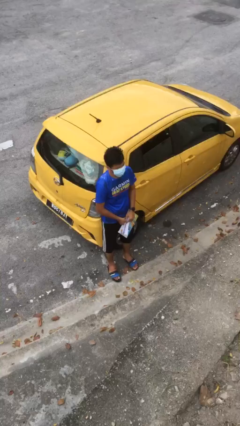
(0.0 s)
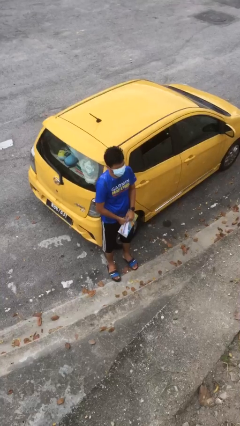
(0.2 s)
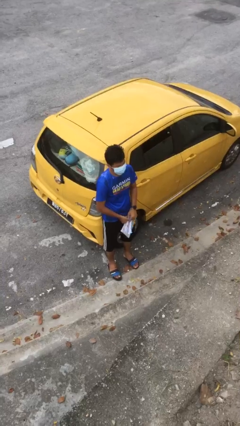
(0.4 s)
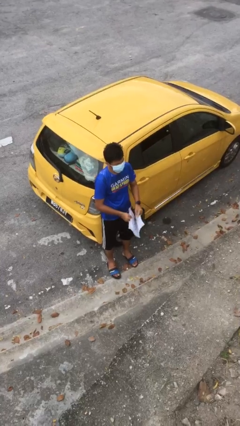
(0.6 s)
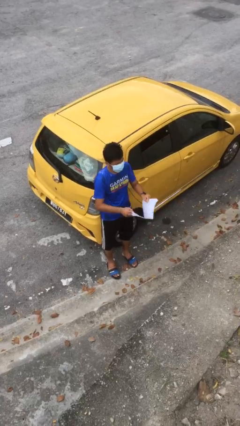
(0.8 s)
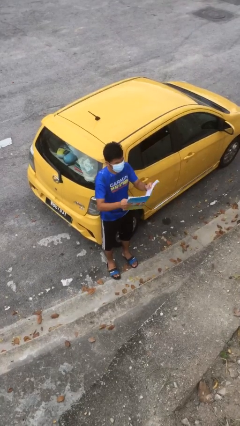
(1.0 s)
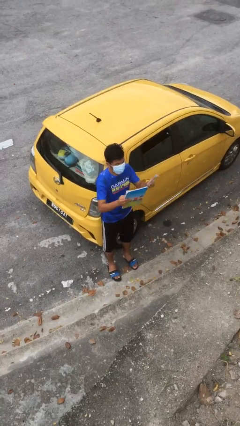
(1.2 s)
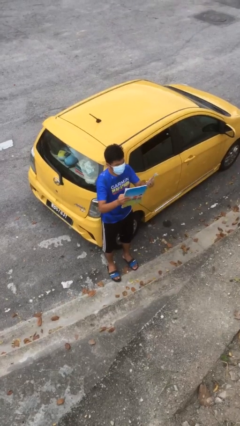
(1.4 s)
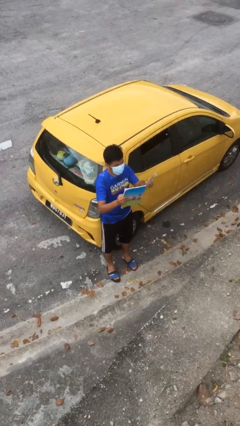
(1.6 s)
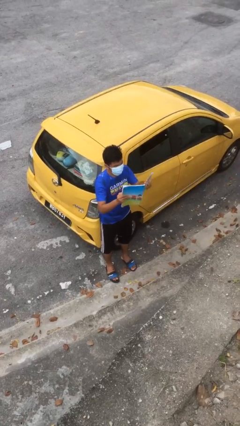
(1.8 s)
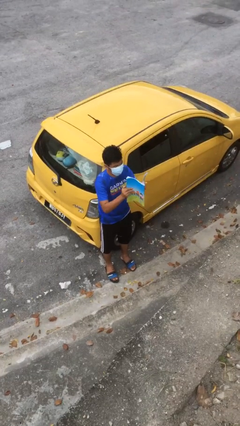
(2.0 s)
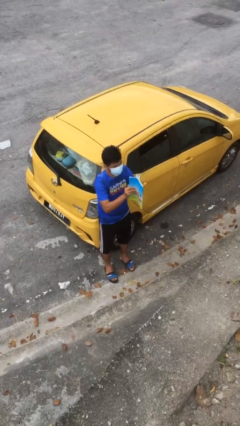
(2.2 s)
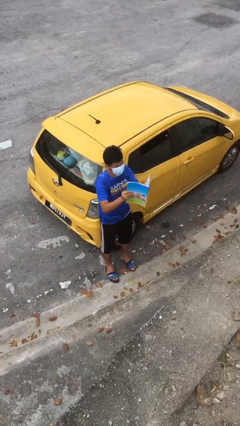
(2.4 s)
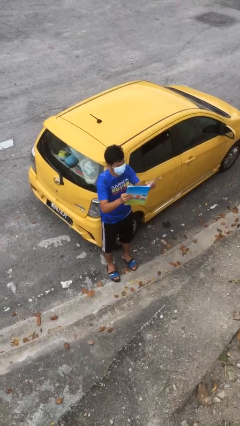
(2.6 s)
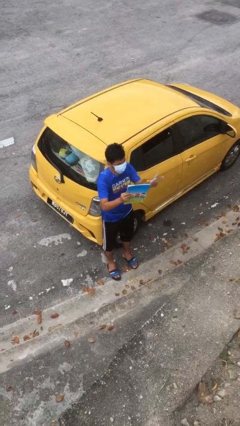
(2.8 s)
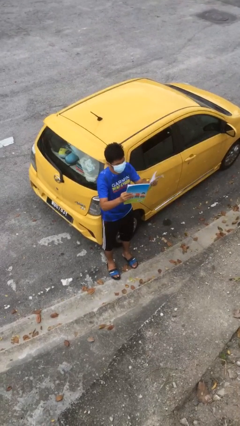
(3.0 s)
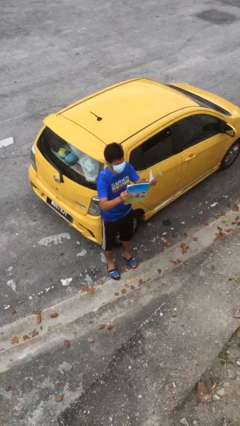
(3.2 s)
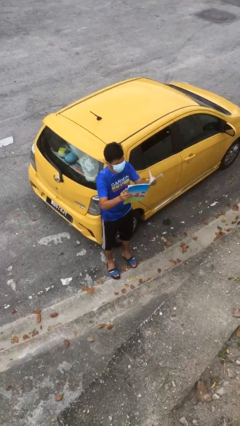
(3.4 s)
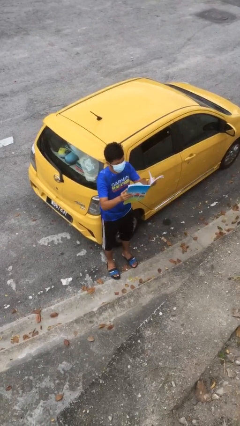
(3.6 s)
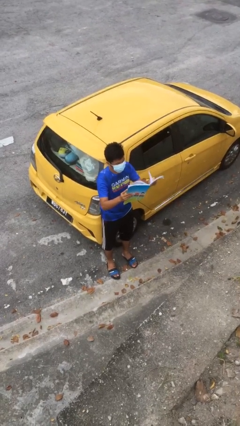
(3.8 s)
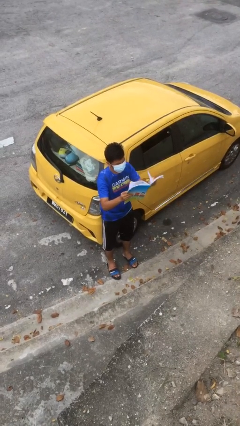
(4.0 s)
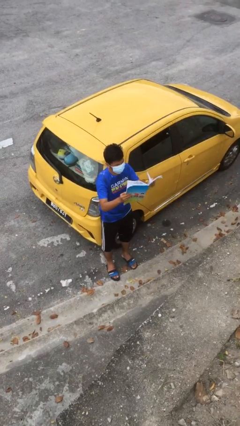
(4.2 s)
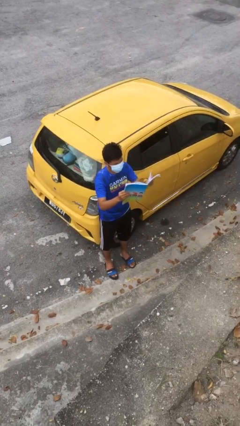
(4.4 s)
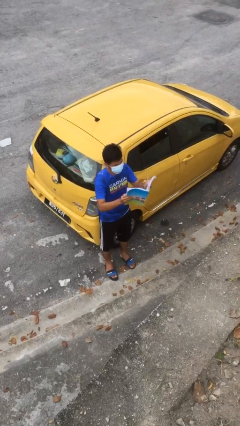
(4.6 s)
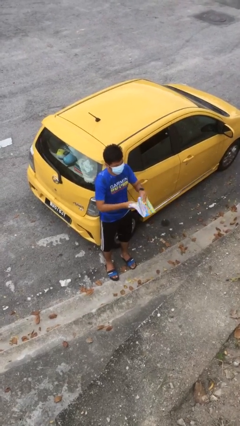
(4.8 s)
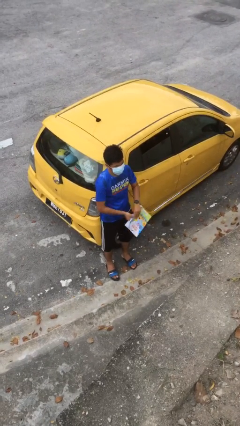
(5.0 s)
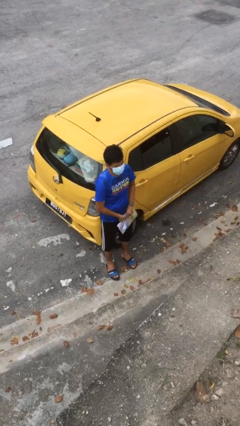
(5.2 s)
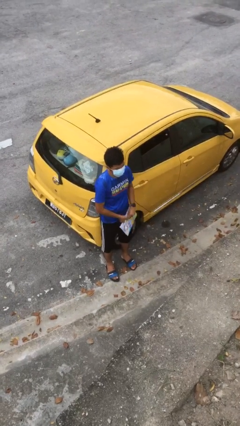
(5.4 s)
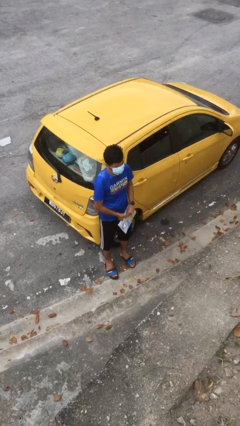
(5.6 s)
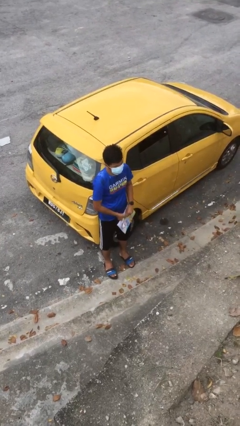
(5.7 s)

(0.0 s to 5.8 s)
person reads document

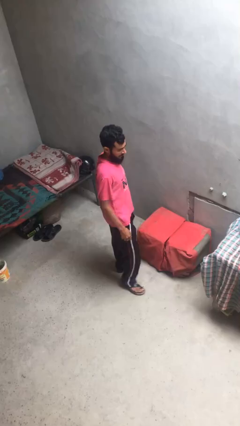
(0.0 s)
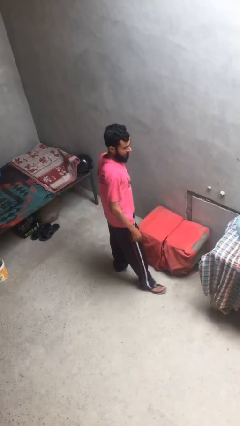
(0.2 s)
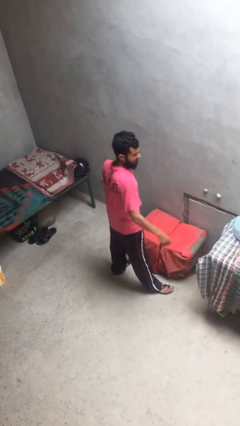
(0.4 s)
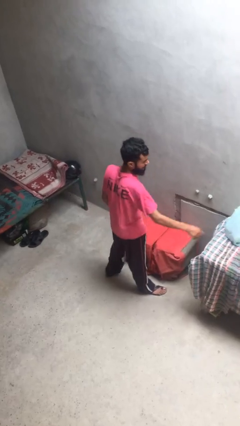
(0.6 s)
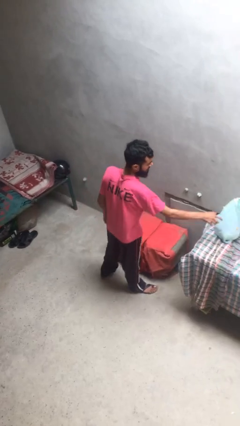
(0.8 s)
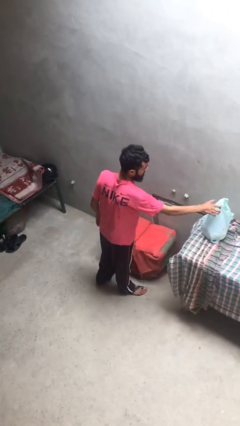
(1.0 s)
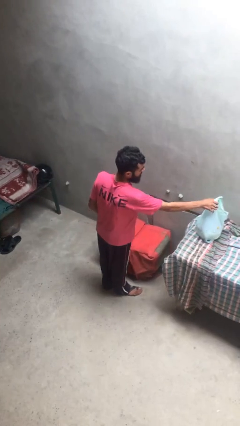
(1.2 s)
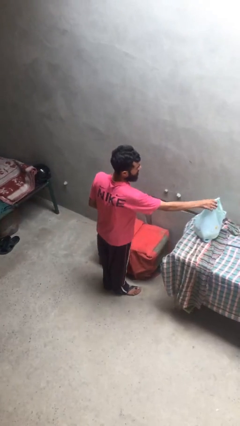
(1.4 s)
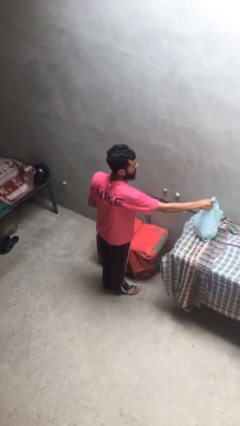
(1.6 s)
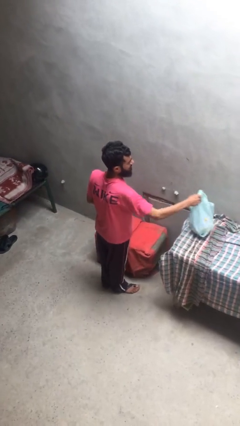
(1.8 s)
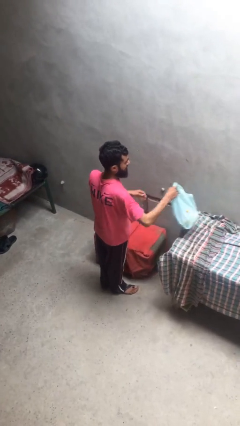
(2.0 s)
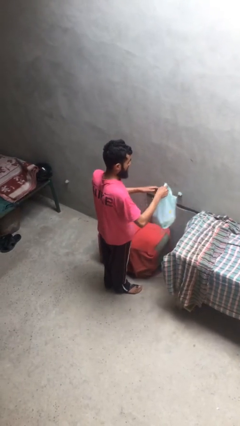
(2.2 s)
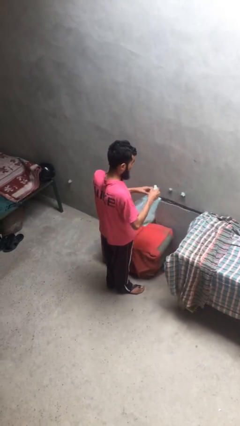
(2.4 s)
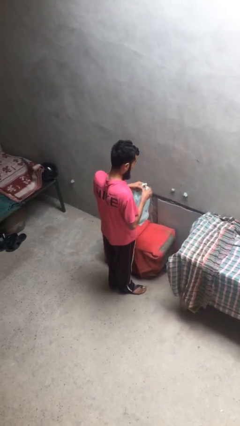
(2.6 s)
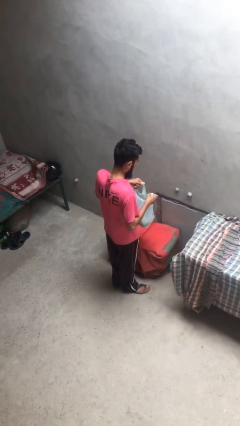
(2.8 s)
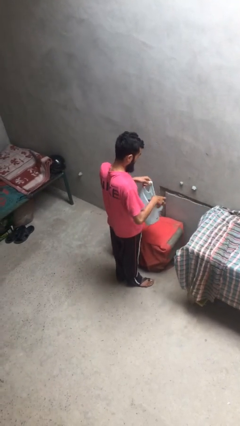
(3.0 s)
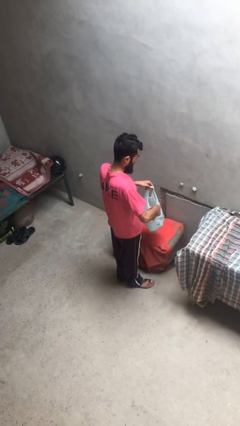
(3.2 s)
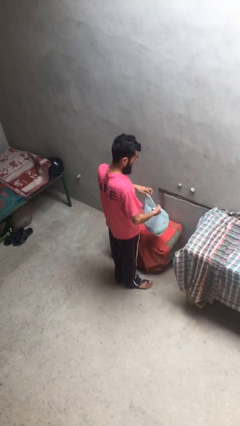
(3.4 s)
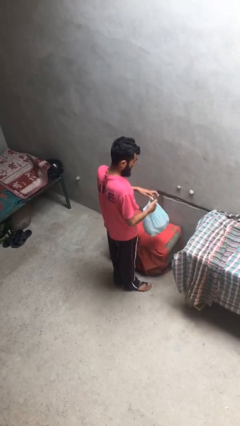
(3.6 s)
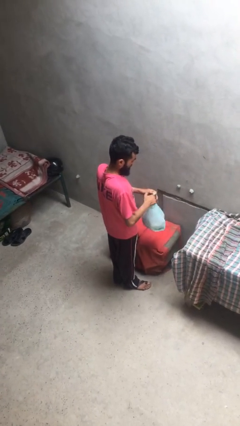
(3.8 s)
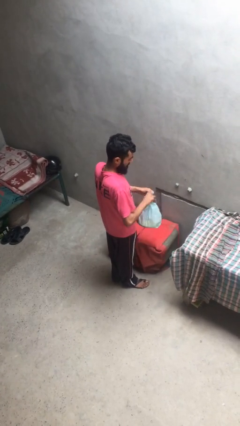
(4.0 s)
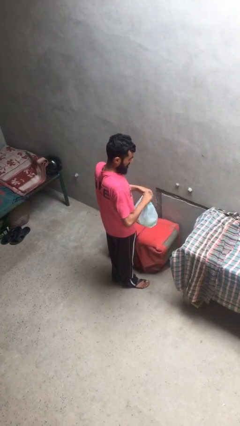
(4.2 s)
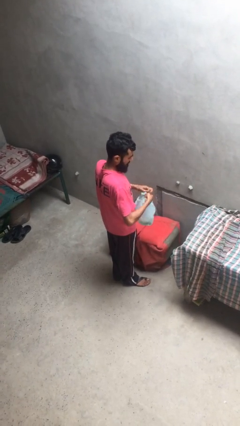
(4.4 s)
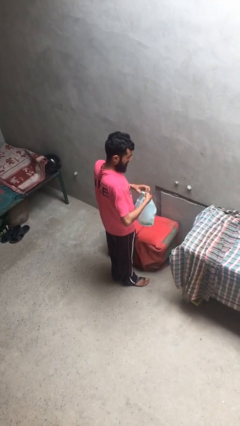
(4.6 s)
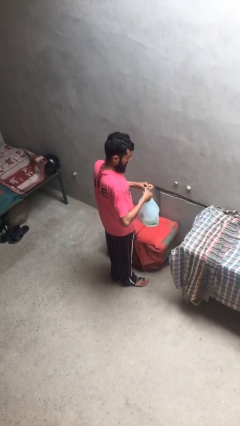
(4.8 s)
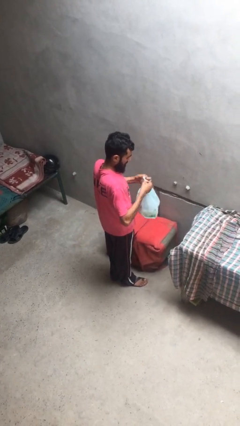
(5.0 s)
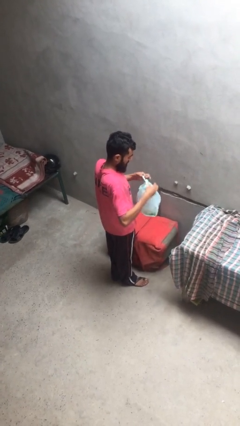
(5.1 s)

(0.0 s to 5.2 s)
person picks up object from shelf

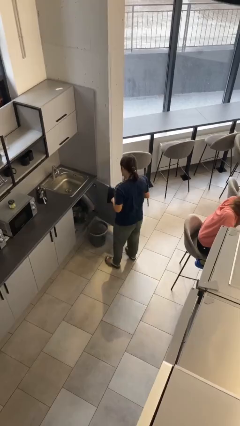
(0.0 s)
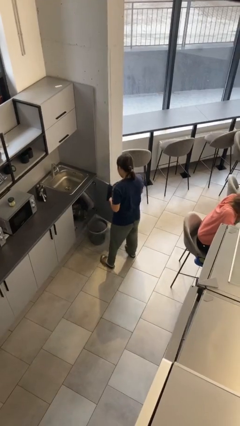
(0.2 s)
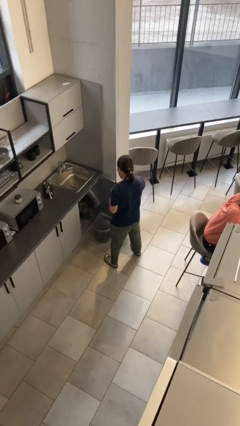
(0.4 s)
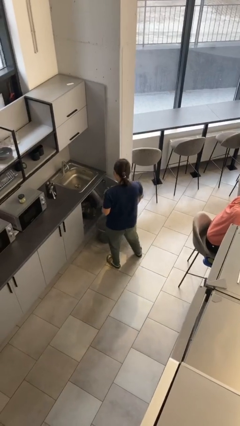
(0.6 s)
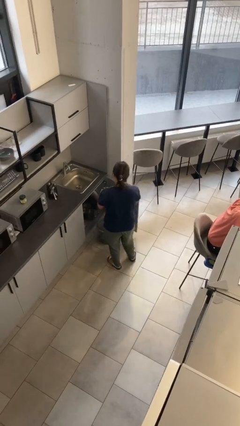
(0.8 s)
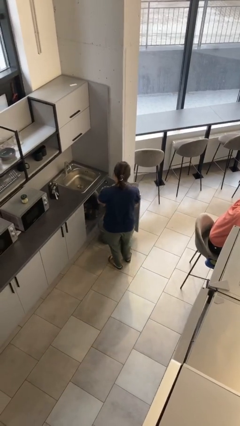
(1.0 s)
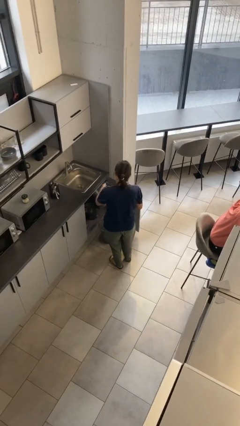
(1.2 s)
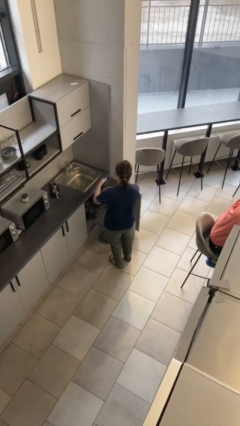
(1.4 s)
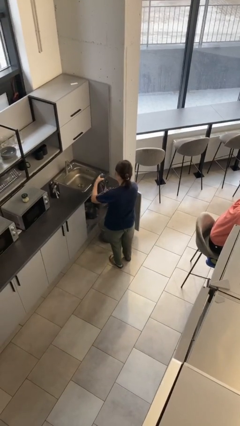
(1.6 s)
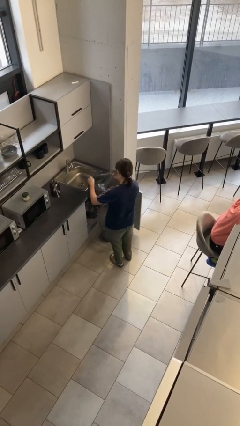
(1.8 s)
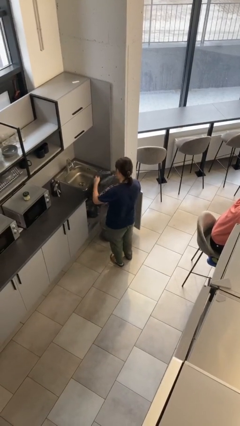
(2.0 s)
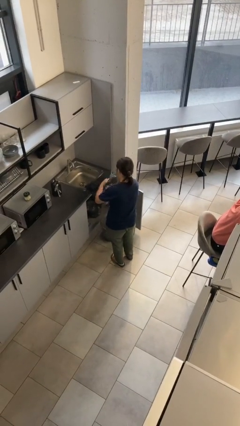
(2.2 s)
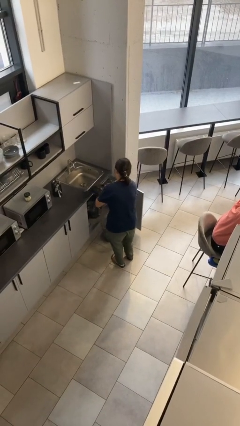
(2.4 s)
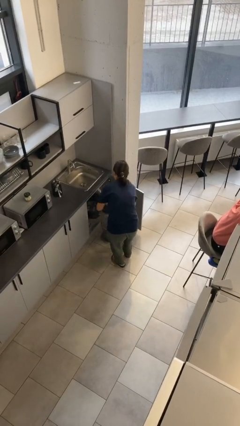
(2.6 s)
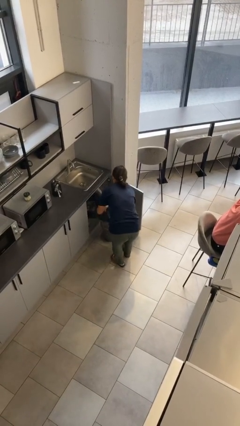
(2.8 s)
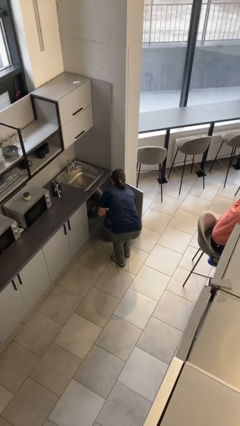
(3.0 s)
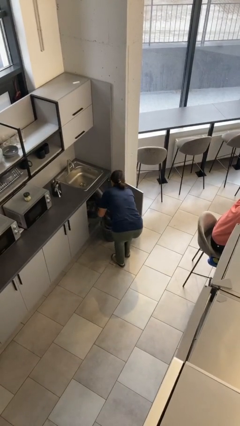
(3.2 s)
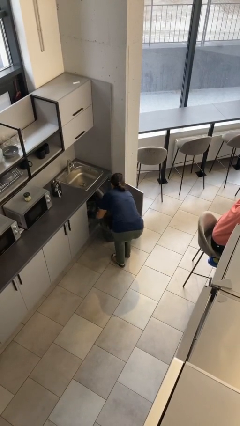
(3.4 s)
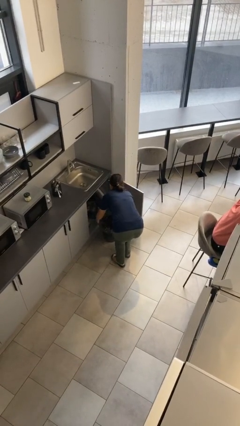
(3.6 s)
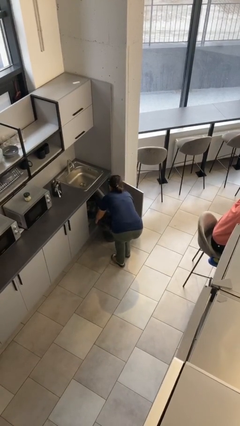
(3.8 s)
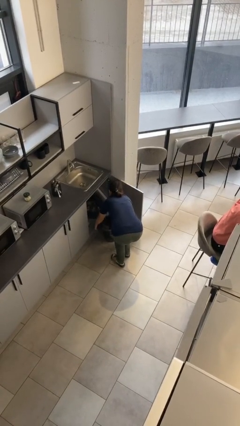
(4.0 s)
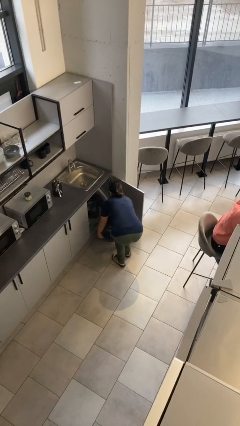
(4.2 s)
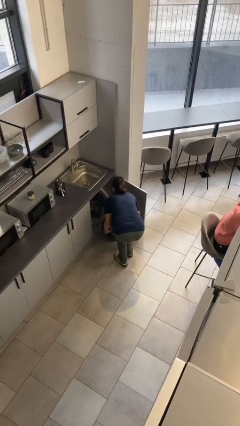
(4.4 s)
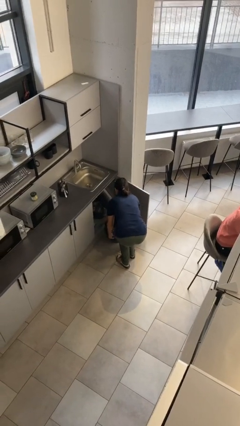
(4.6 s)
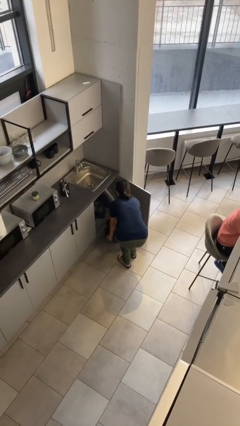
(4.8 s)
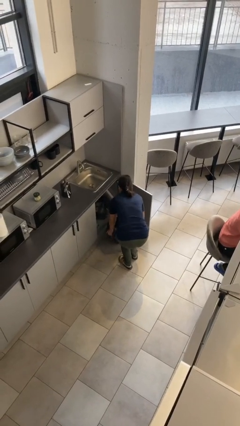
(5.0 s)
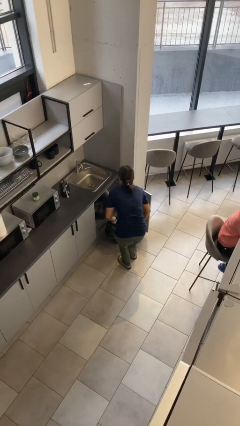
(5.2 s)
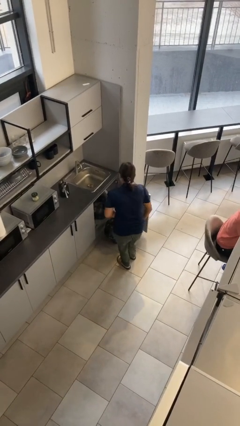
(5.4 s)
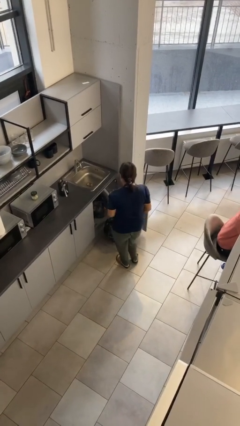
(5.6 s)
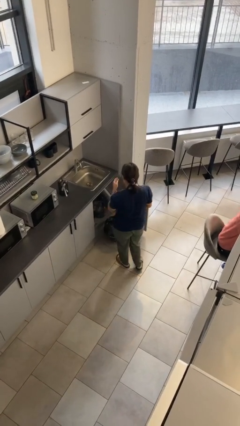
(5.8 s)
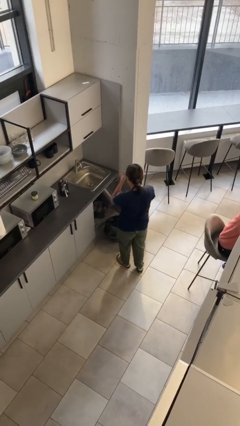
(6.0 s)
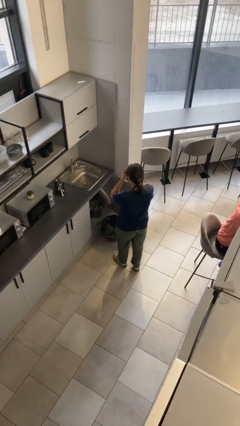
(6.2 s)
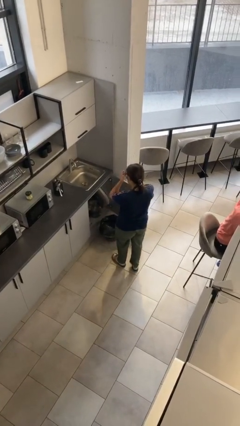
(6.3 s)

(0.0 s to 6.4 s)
person inserts trashbag into trashcan

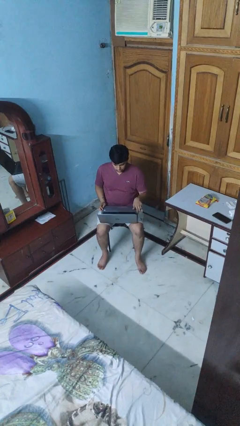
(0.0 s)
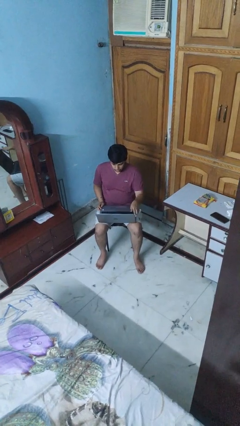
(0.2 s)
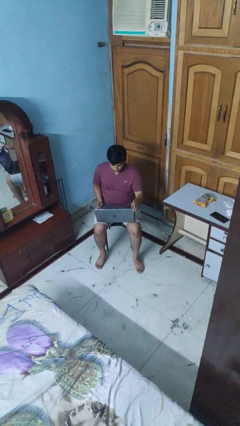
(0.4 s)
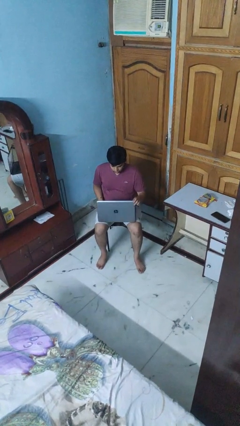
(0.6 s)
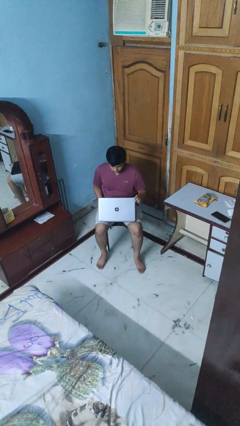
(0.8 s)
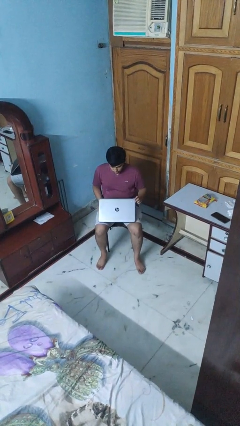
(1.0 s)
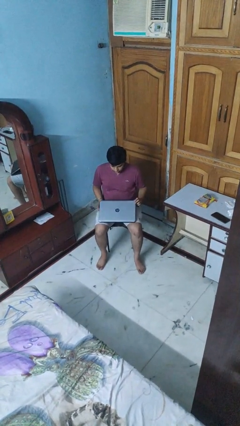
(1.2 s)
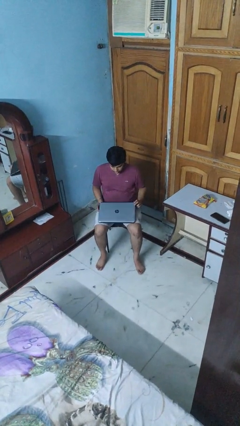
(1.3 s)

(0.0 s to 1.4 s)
person closes laptop
